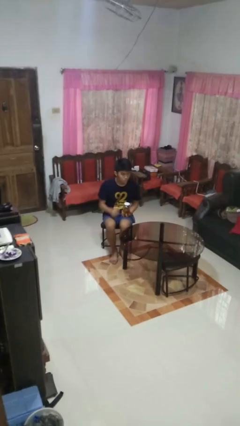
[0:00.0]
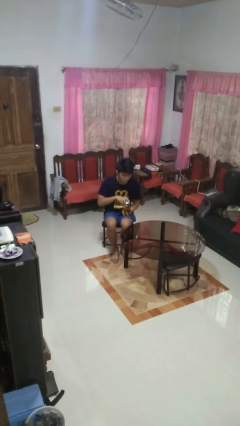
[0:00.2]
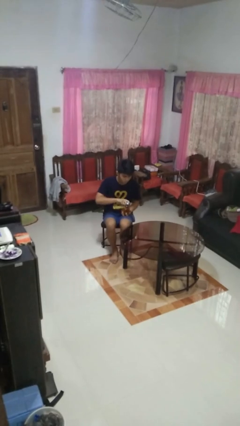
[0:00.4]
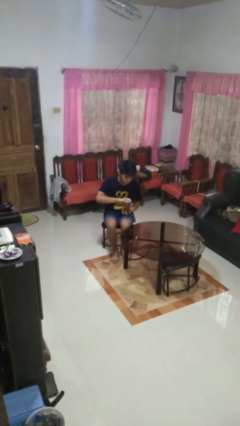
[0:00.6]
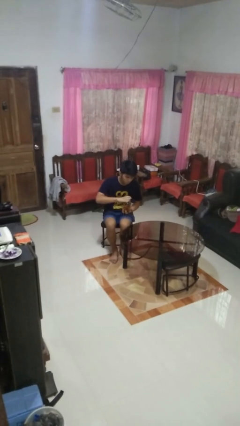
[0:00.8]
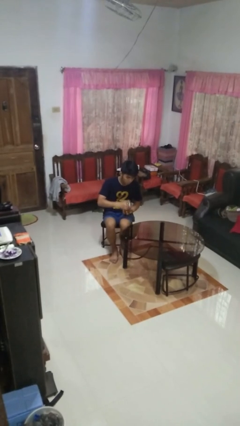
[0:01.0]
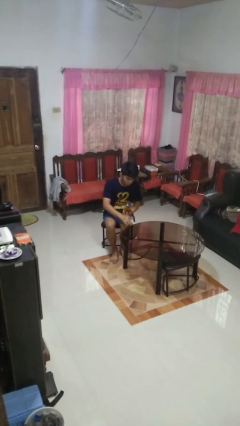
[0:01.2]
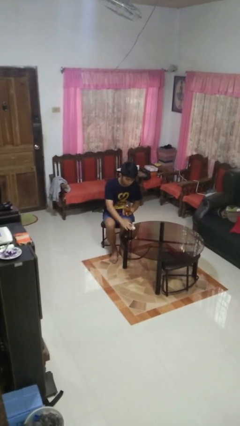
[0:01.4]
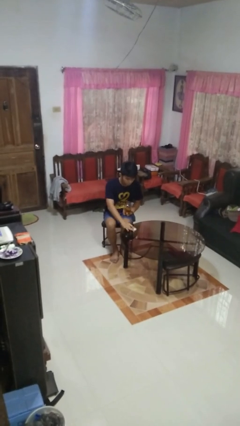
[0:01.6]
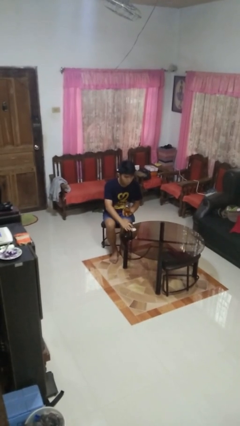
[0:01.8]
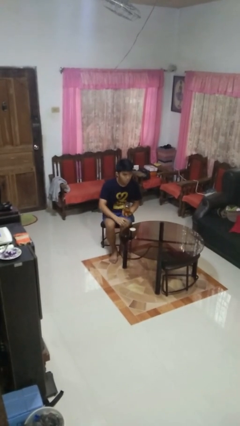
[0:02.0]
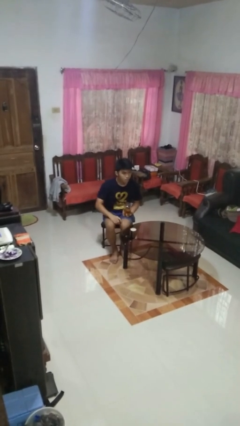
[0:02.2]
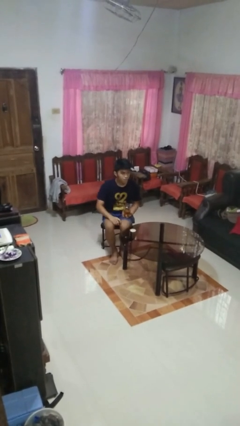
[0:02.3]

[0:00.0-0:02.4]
person opens jar

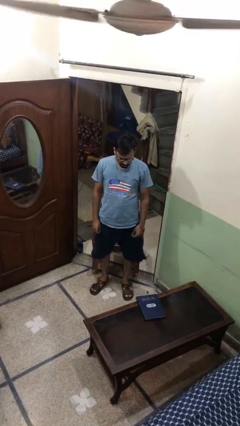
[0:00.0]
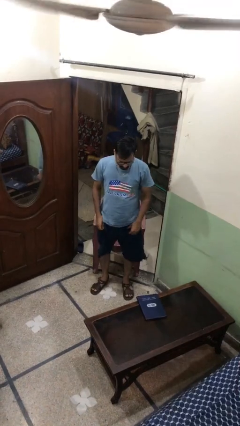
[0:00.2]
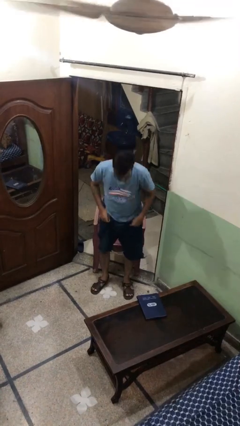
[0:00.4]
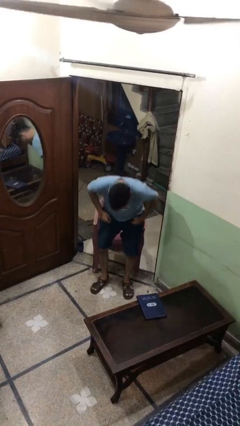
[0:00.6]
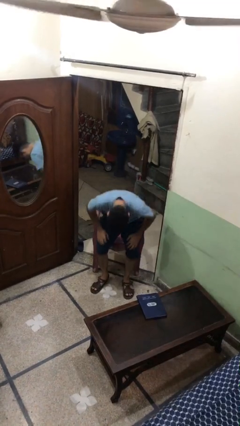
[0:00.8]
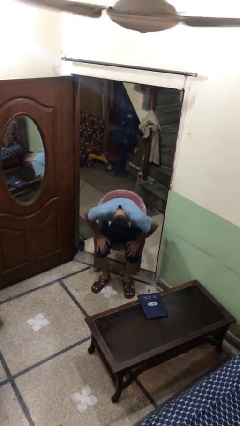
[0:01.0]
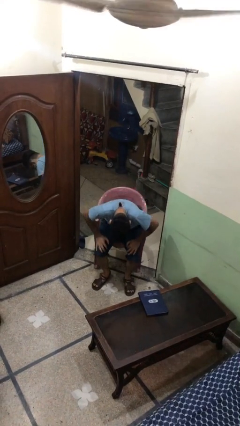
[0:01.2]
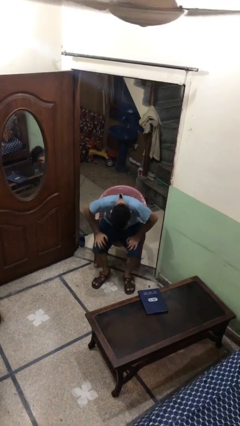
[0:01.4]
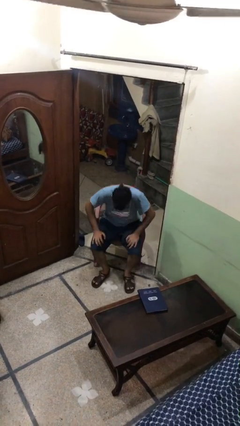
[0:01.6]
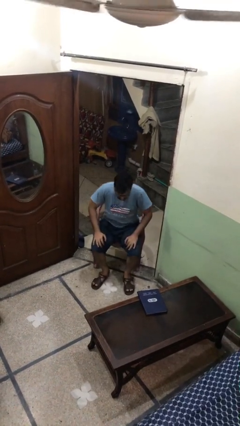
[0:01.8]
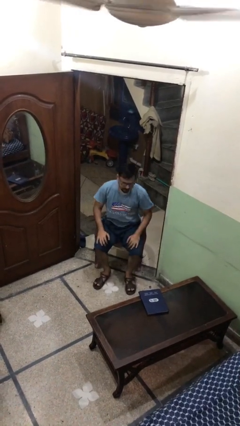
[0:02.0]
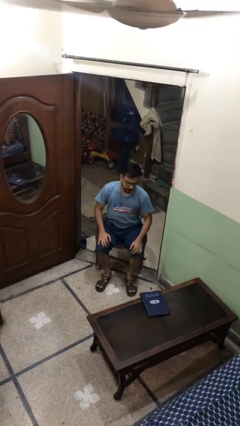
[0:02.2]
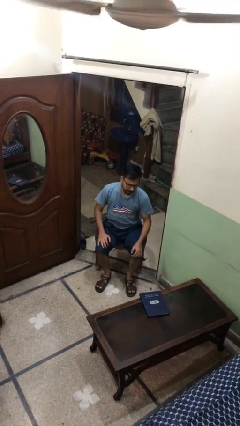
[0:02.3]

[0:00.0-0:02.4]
person sits down

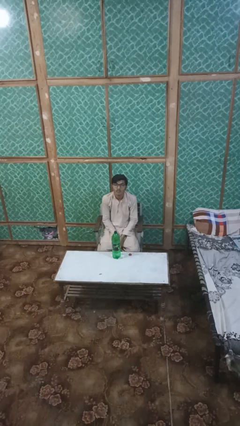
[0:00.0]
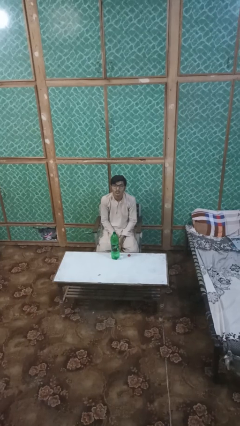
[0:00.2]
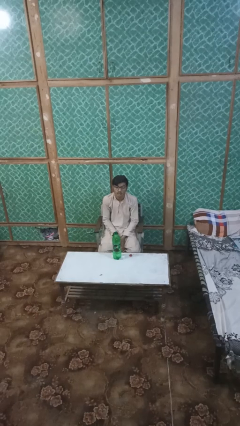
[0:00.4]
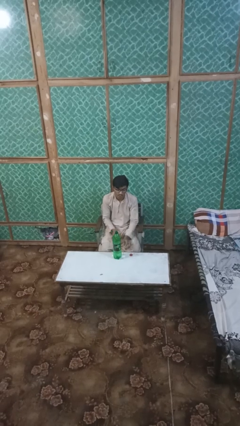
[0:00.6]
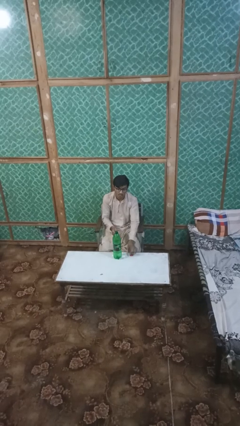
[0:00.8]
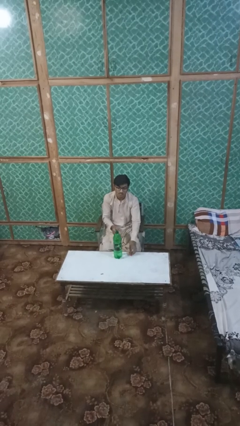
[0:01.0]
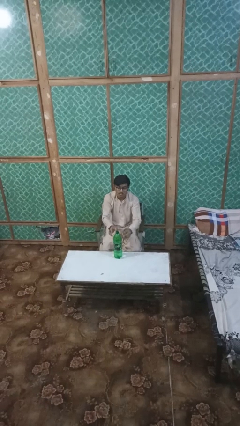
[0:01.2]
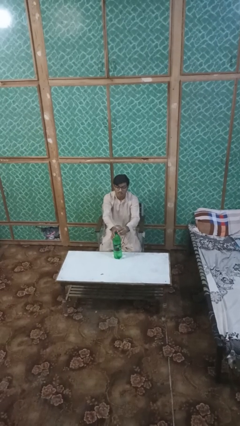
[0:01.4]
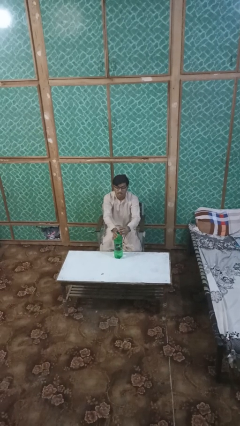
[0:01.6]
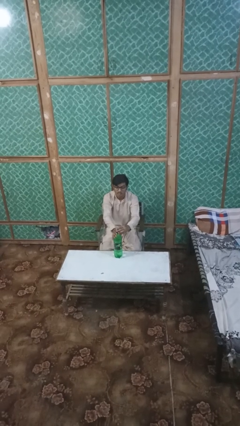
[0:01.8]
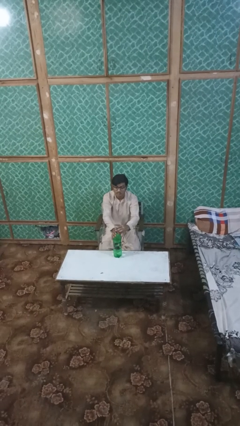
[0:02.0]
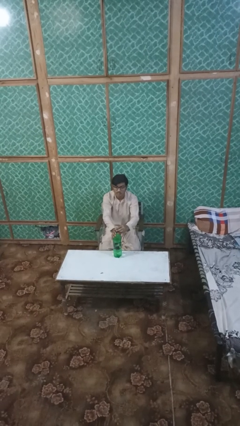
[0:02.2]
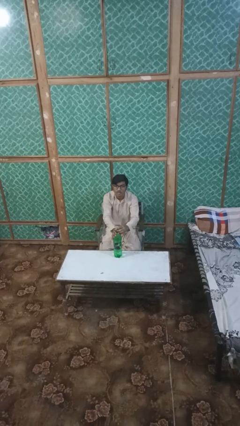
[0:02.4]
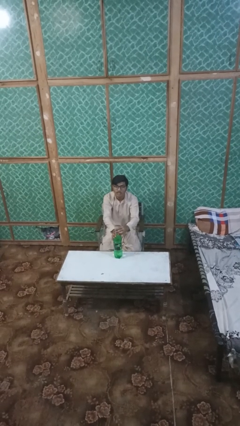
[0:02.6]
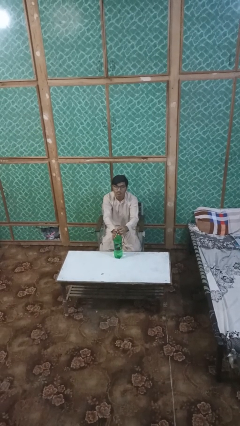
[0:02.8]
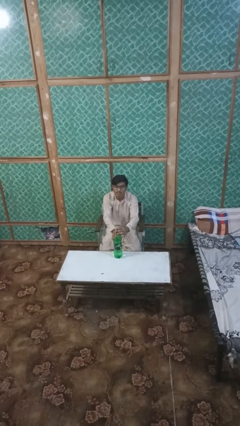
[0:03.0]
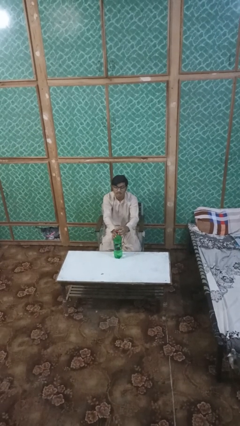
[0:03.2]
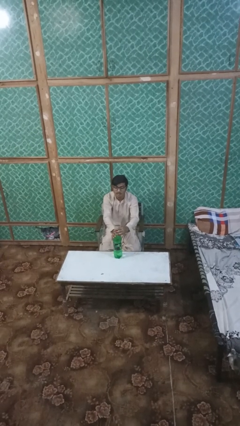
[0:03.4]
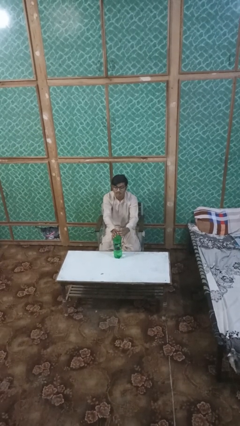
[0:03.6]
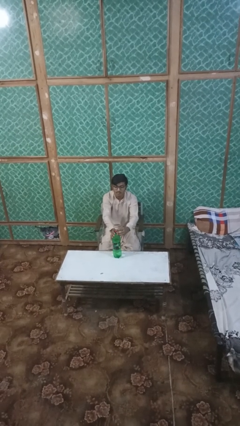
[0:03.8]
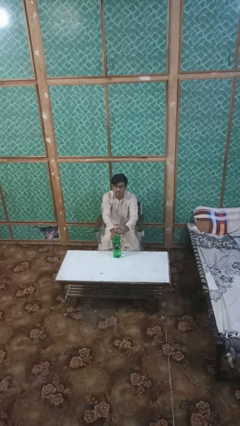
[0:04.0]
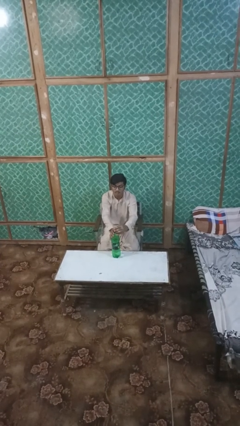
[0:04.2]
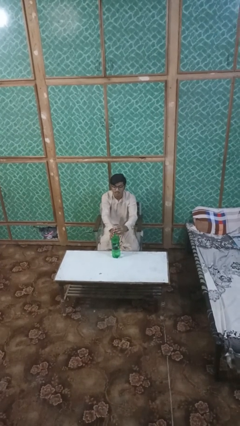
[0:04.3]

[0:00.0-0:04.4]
person screws lid to bottle

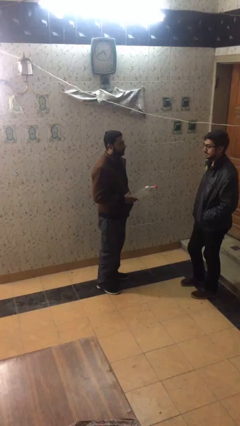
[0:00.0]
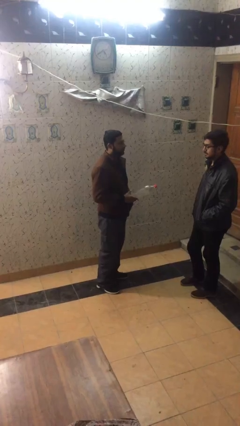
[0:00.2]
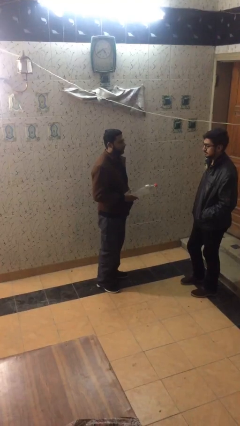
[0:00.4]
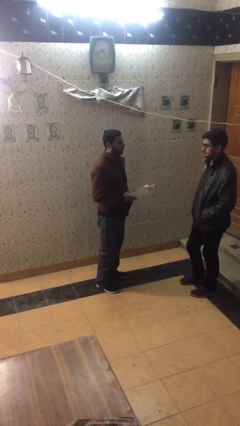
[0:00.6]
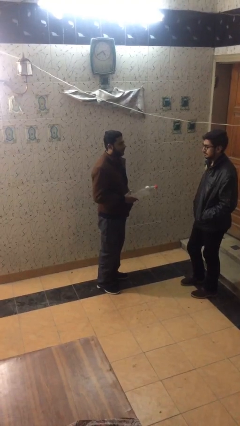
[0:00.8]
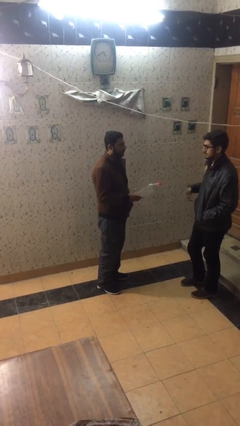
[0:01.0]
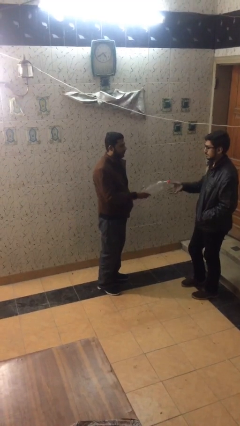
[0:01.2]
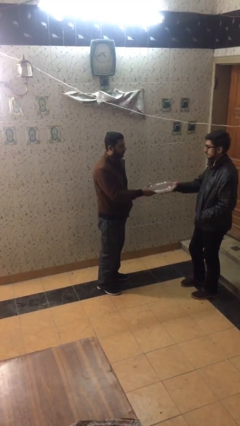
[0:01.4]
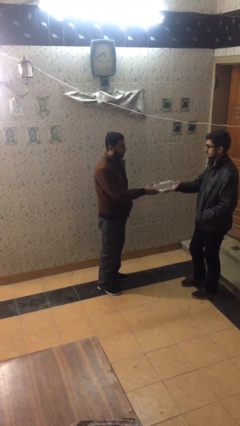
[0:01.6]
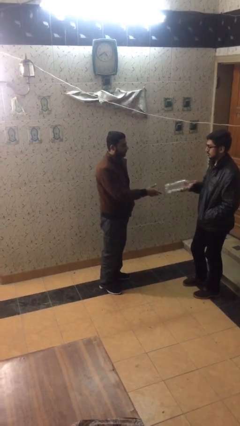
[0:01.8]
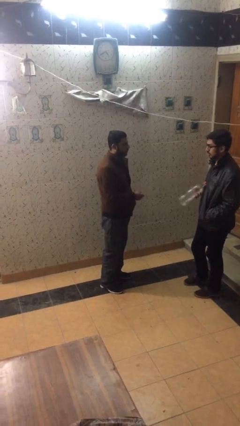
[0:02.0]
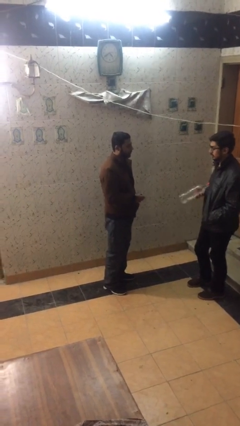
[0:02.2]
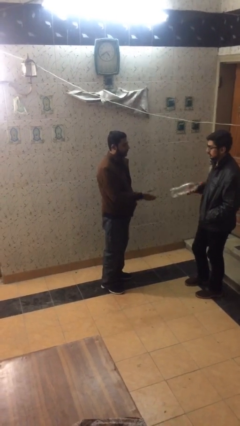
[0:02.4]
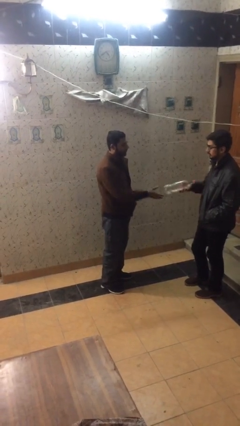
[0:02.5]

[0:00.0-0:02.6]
person transfers object to person

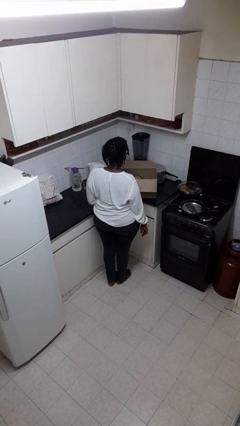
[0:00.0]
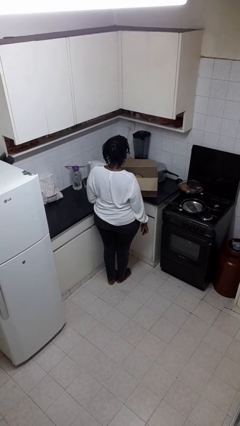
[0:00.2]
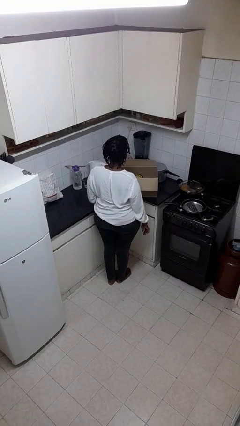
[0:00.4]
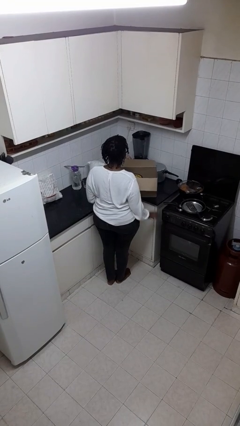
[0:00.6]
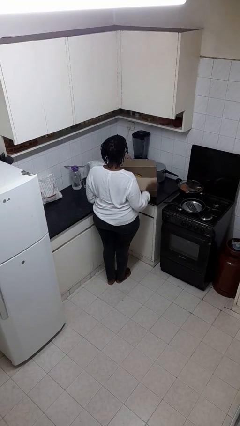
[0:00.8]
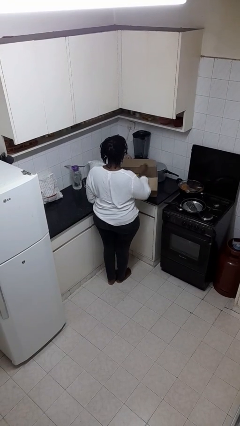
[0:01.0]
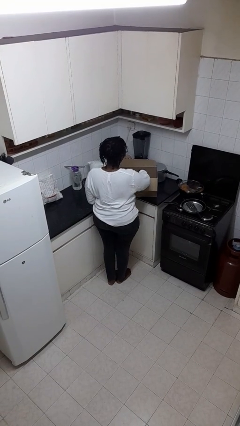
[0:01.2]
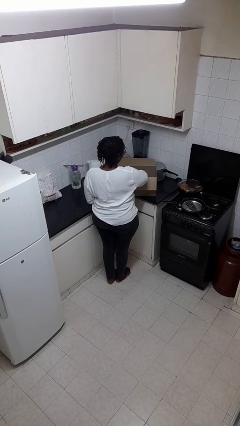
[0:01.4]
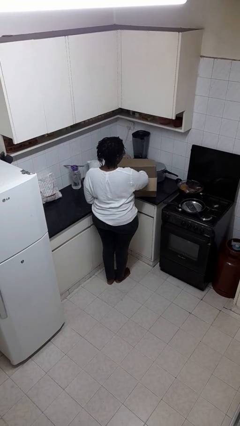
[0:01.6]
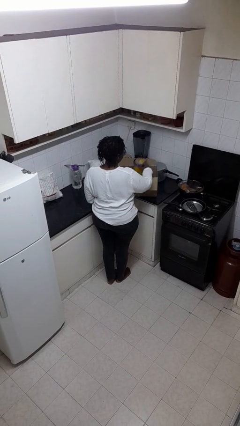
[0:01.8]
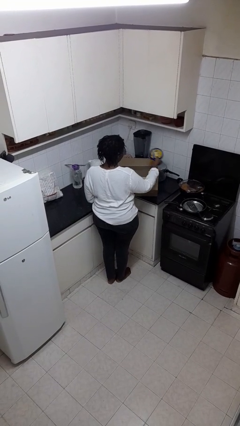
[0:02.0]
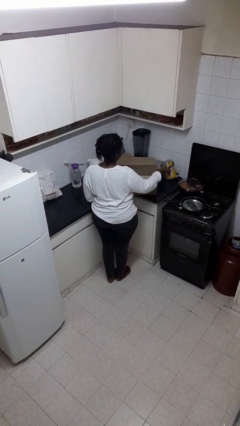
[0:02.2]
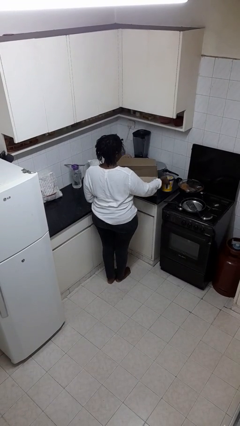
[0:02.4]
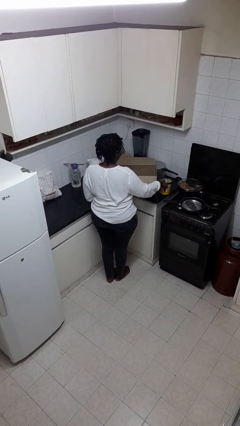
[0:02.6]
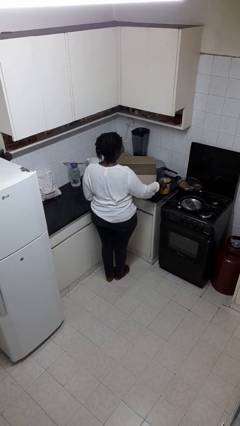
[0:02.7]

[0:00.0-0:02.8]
person takes object from box

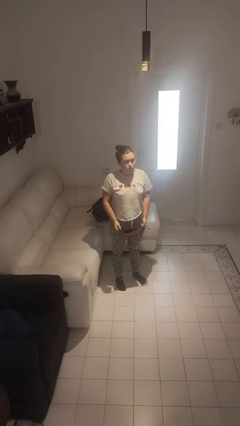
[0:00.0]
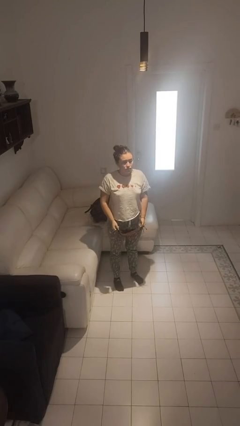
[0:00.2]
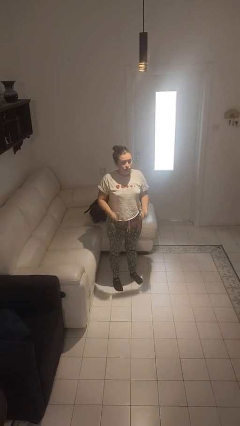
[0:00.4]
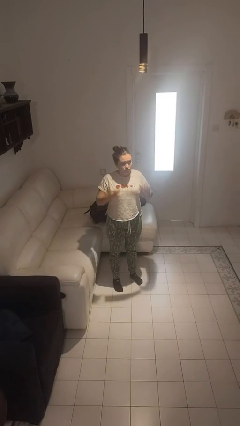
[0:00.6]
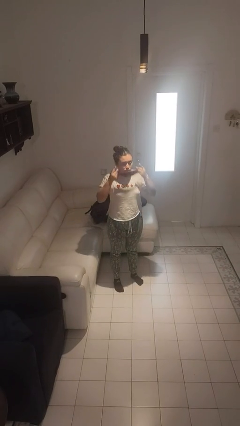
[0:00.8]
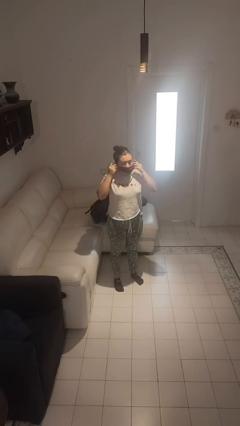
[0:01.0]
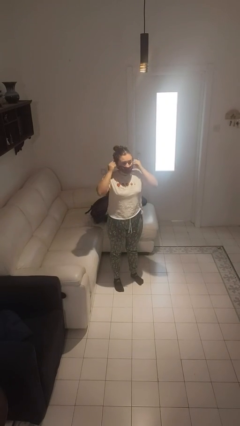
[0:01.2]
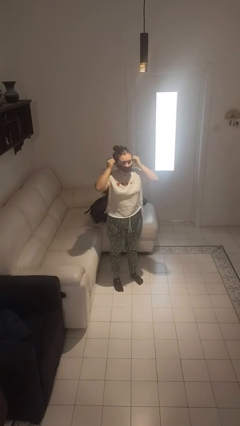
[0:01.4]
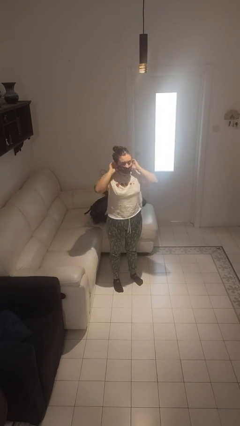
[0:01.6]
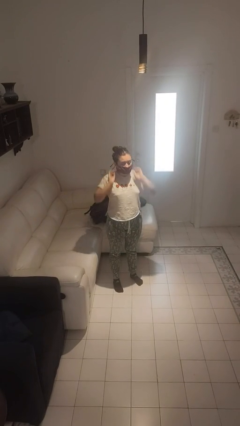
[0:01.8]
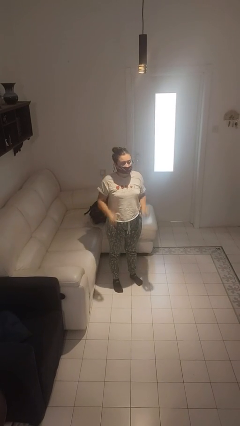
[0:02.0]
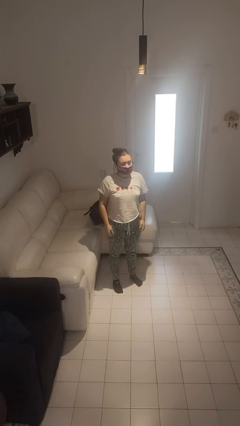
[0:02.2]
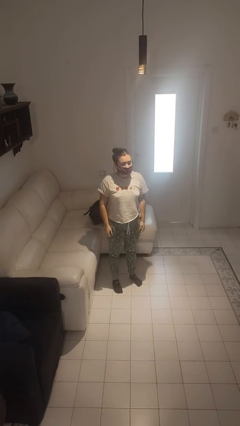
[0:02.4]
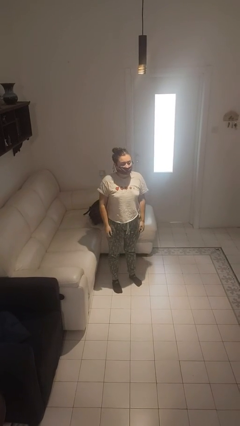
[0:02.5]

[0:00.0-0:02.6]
person puts on facemask
